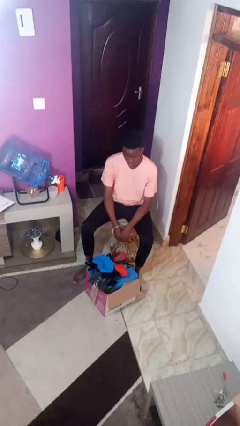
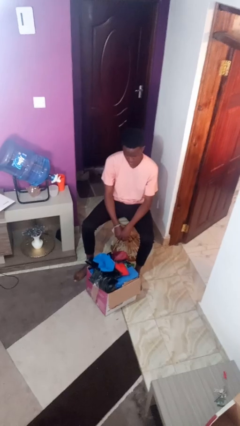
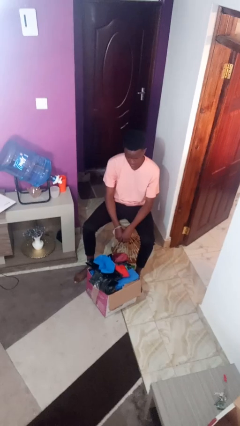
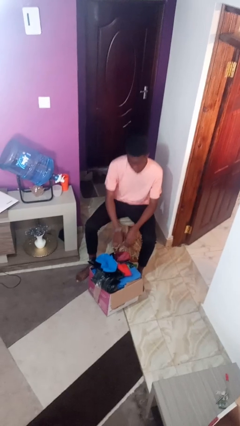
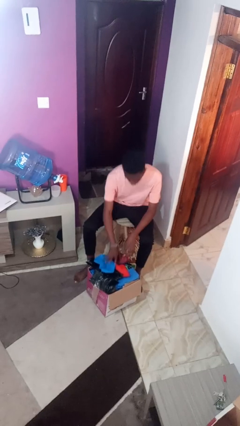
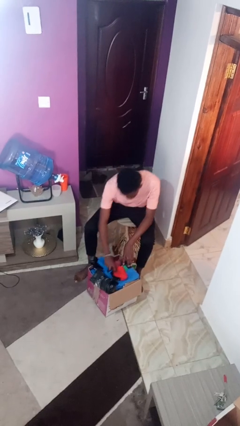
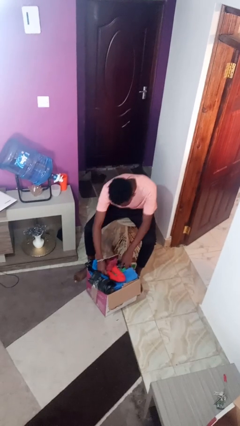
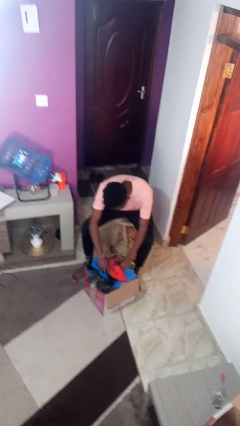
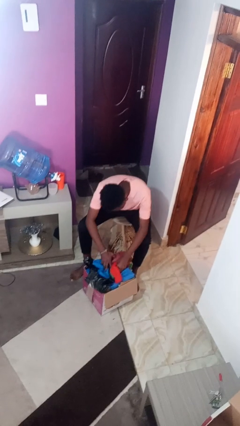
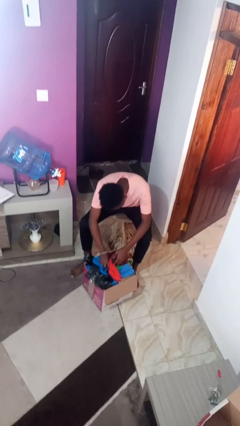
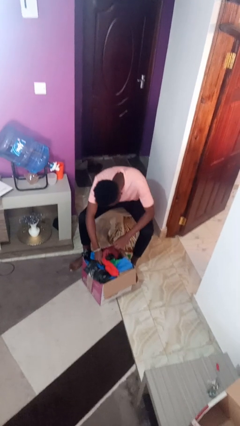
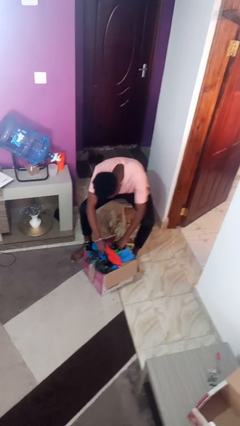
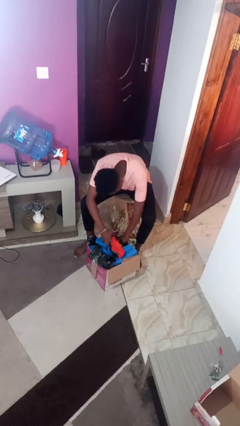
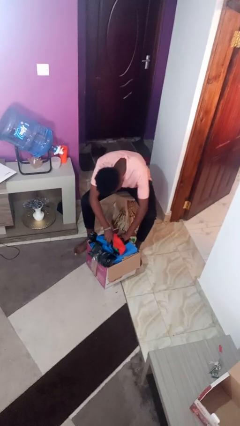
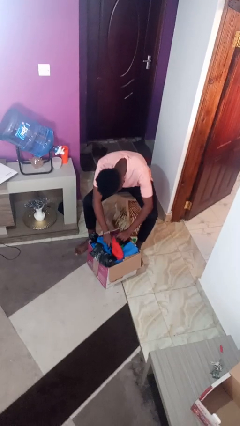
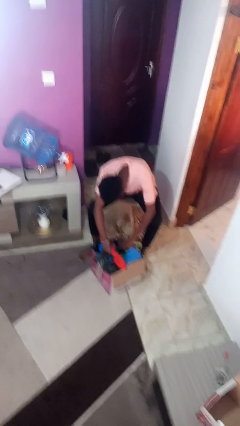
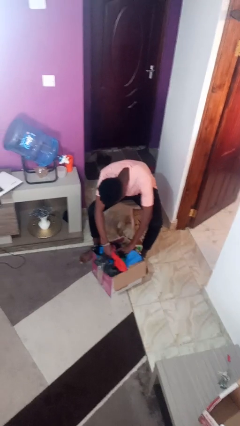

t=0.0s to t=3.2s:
person searches in box

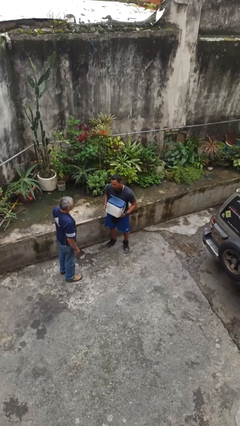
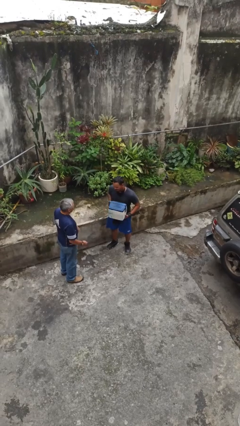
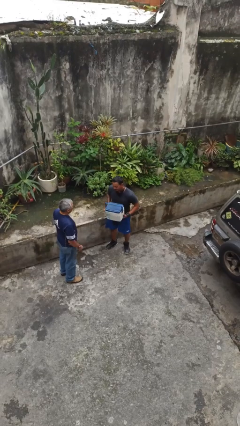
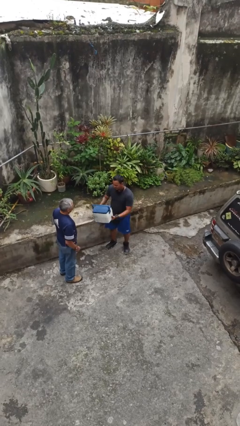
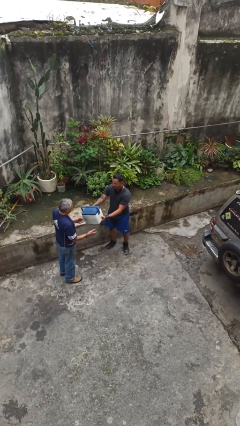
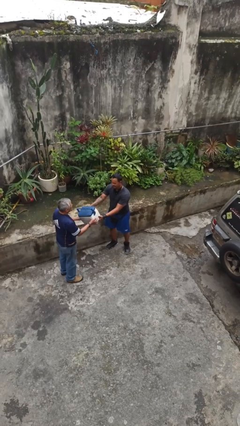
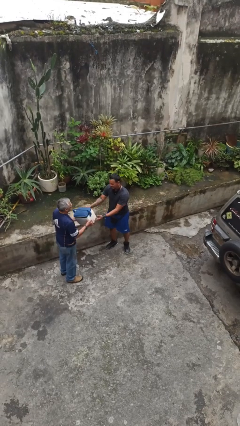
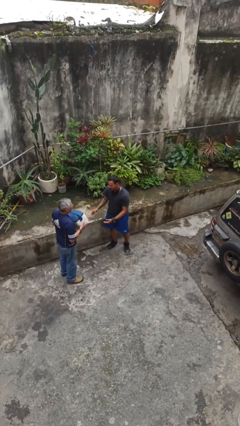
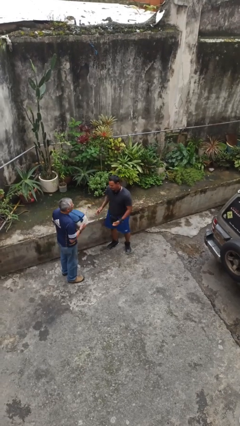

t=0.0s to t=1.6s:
person transfers object to person

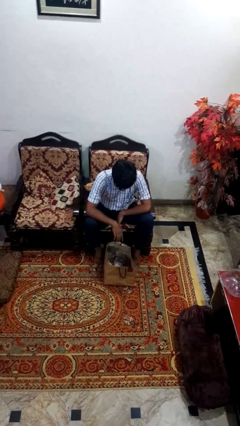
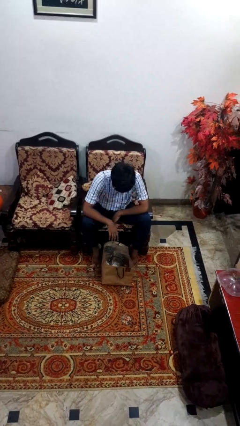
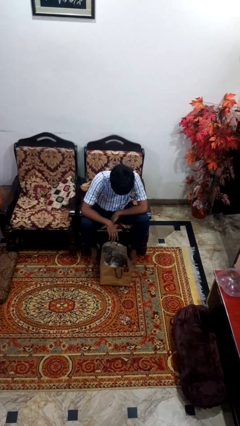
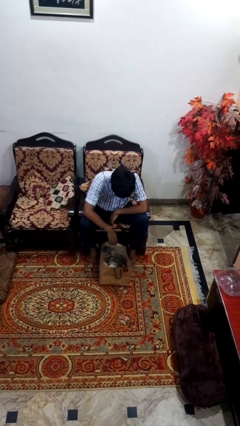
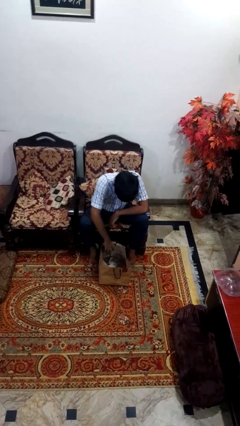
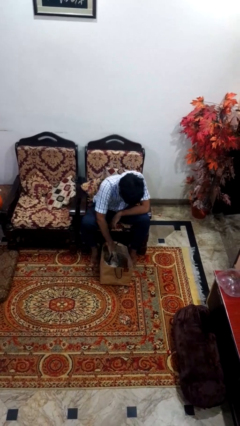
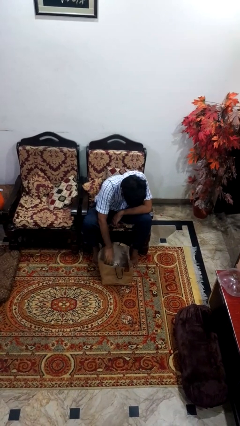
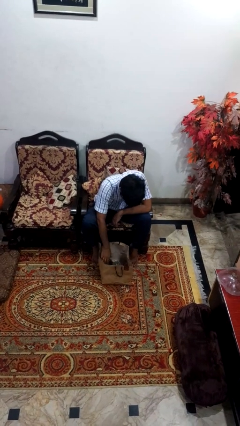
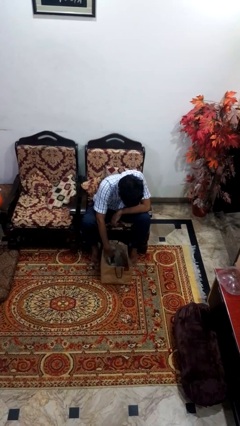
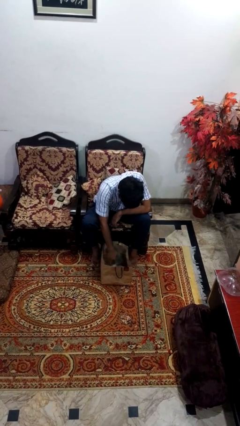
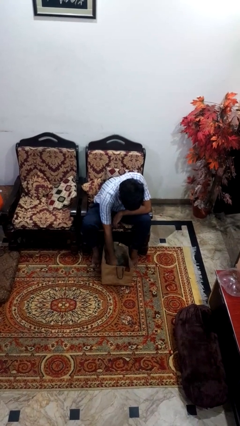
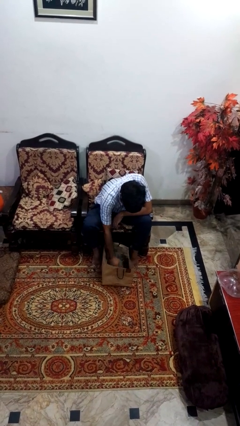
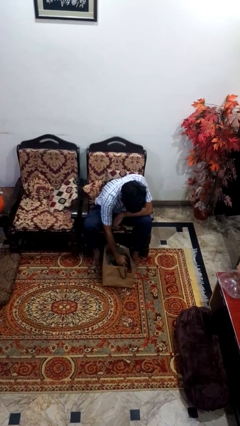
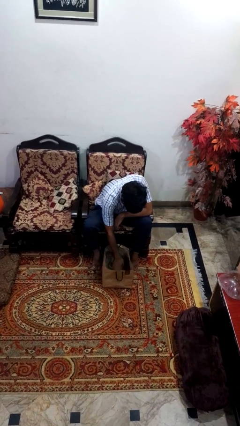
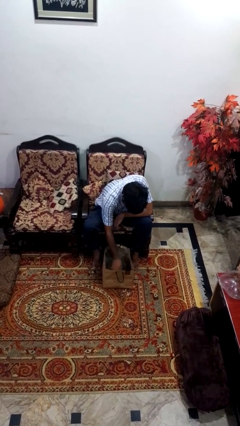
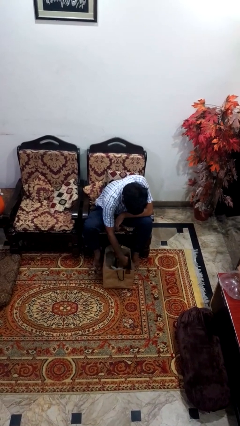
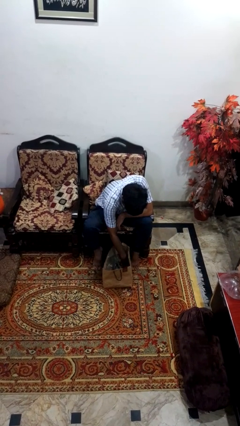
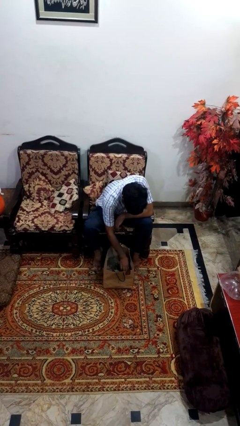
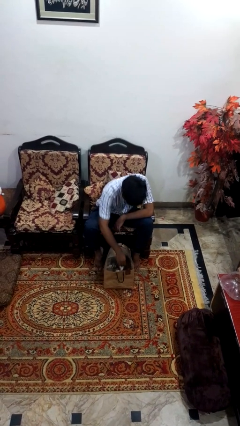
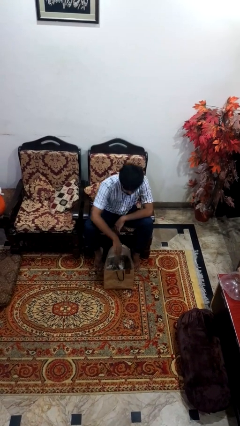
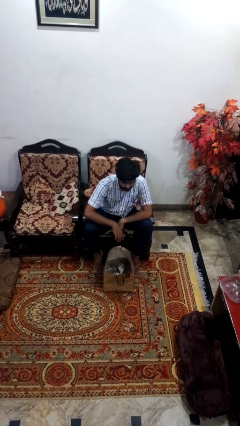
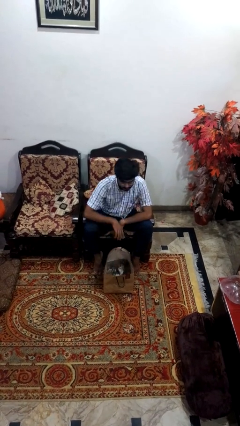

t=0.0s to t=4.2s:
person searches in bag

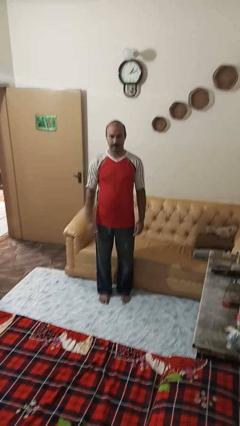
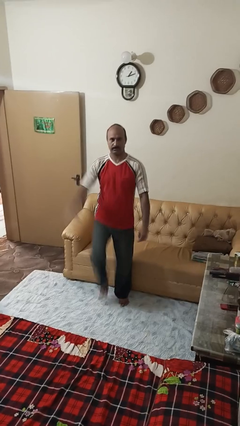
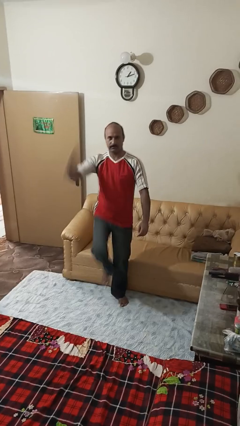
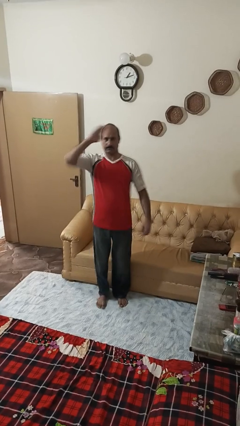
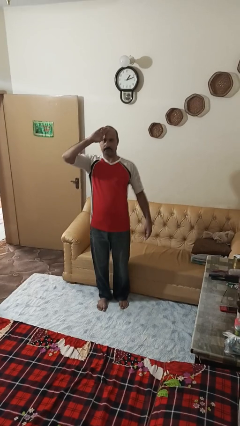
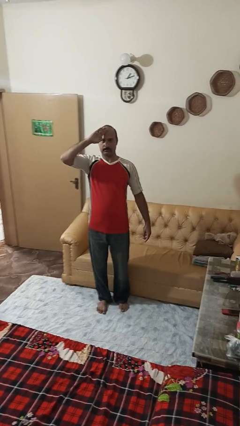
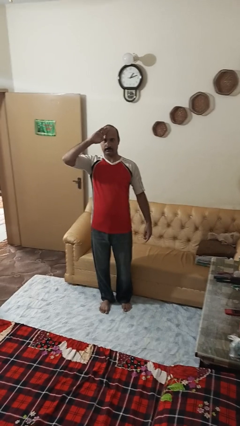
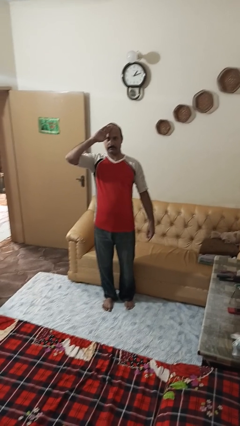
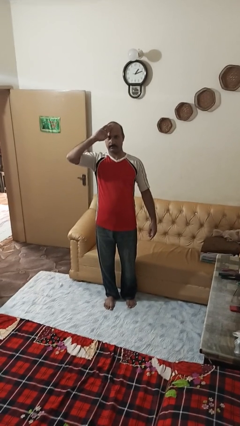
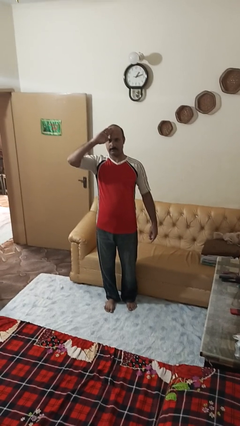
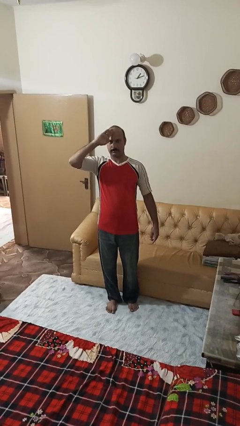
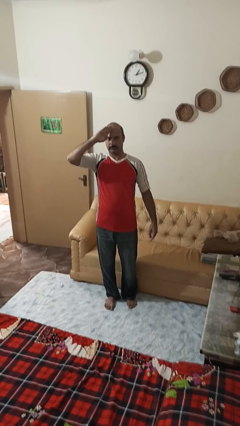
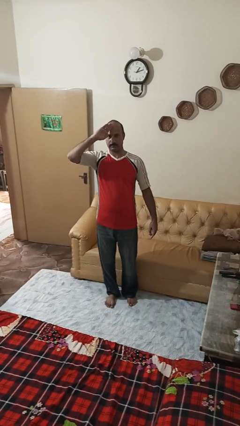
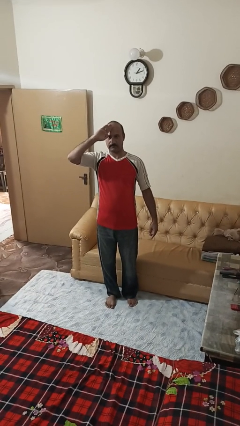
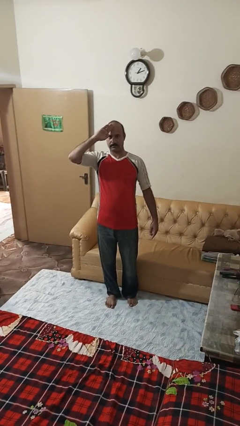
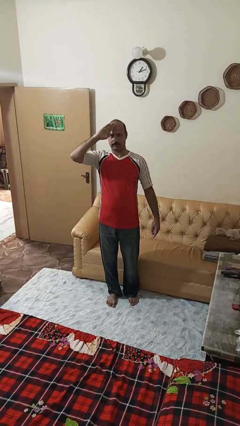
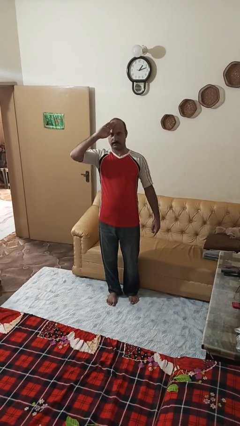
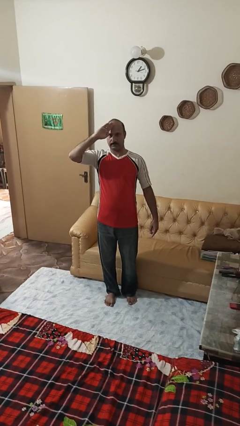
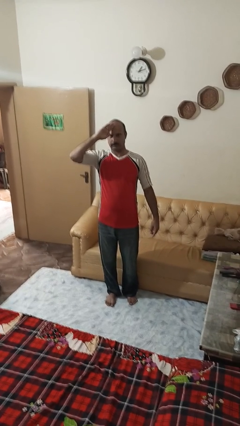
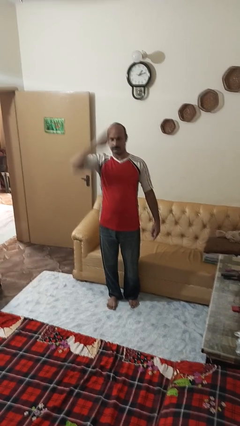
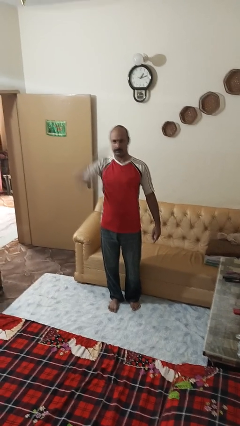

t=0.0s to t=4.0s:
person salutes

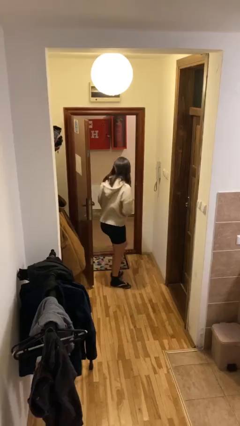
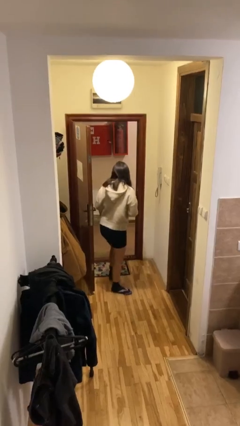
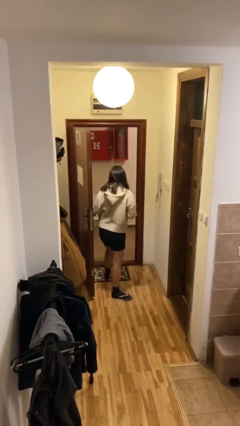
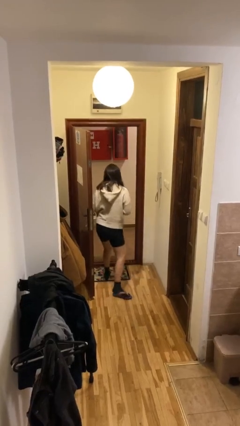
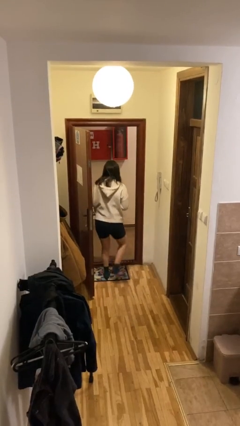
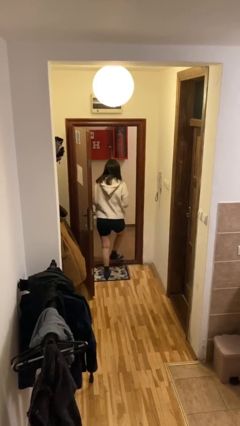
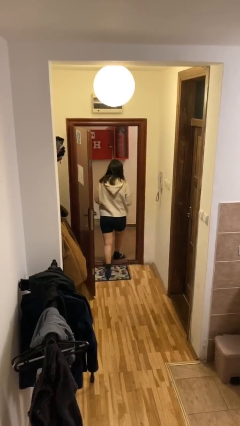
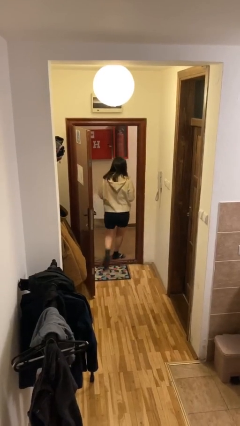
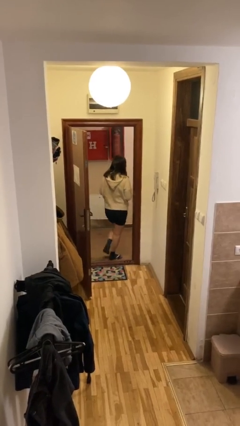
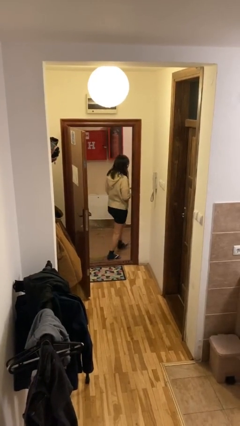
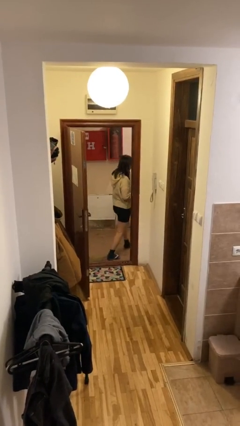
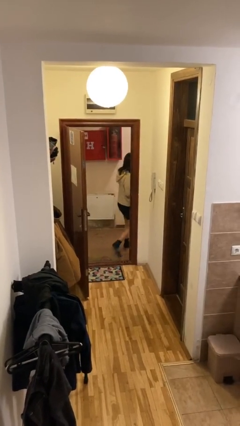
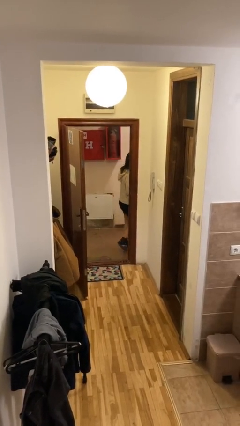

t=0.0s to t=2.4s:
person exits scene through structure

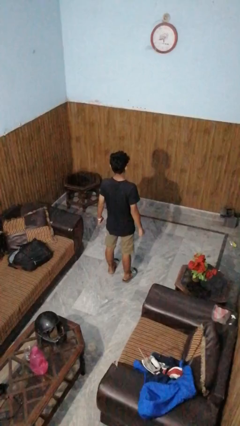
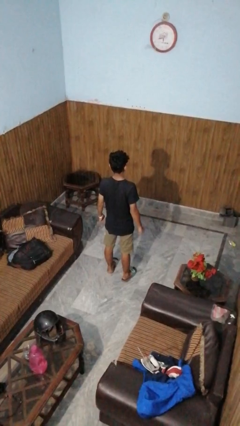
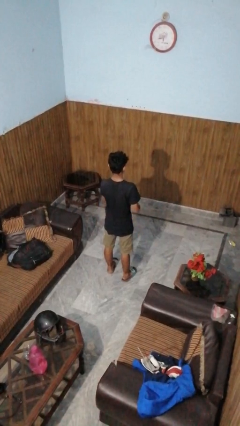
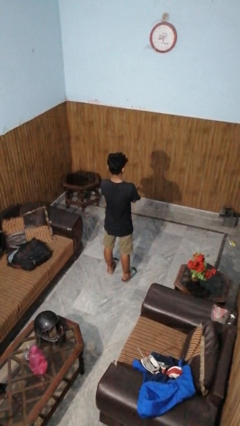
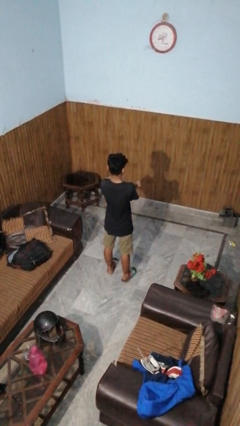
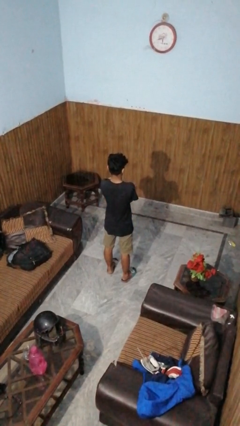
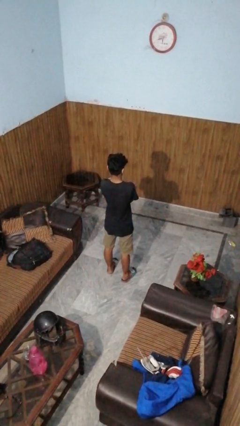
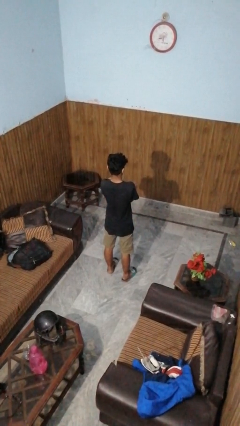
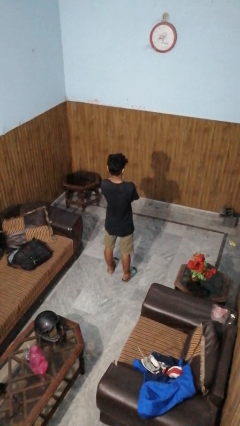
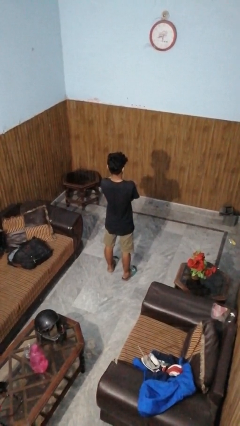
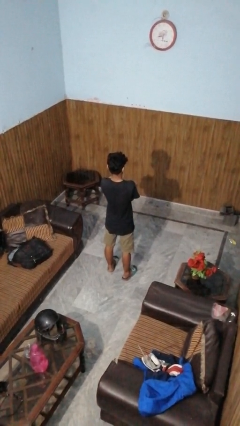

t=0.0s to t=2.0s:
person crosses arms
